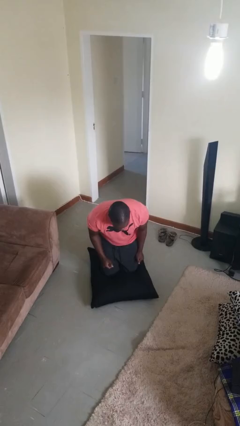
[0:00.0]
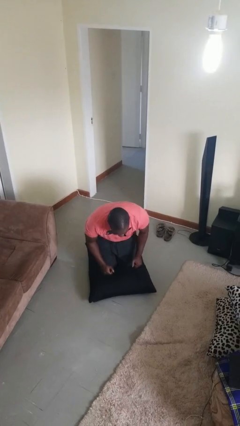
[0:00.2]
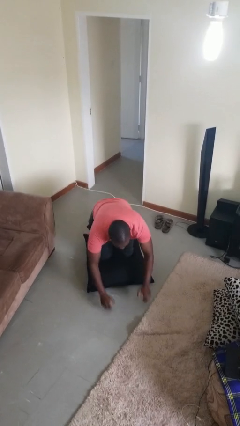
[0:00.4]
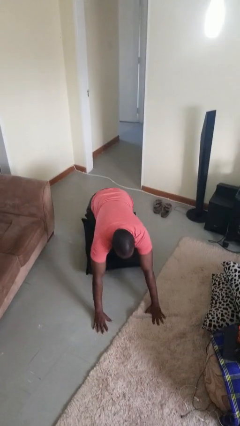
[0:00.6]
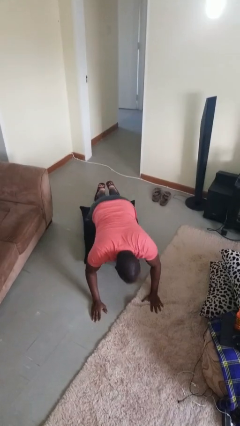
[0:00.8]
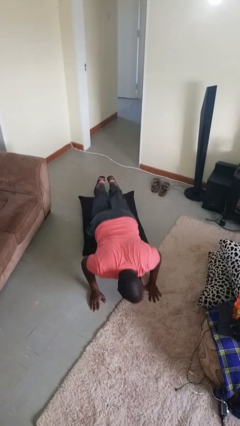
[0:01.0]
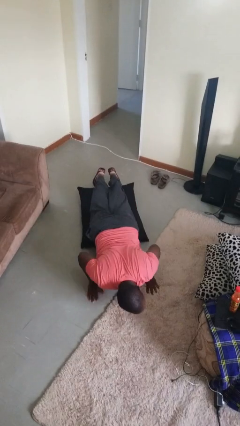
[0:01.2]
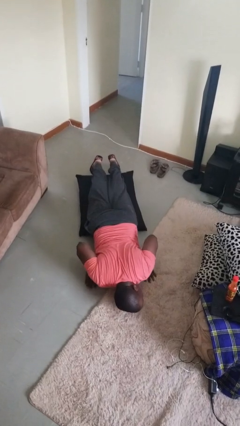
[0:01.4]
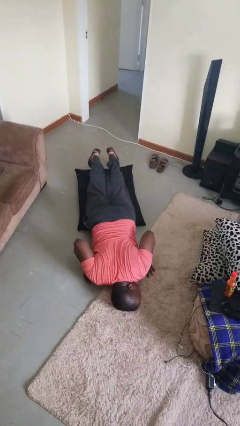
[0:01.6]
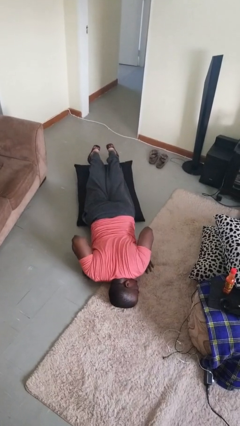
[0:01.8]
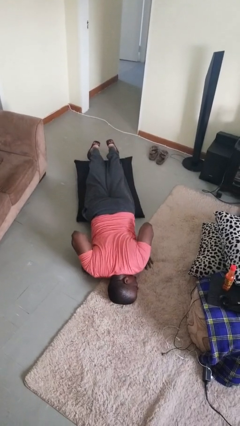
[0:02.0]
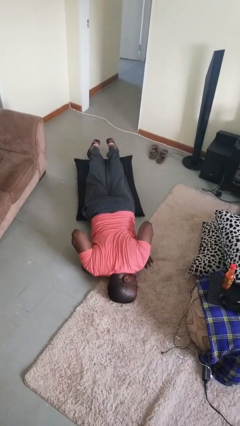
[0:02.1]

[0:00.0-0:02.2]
person lies down on floor

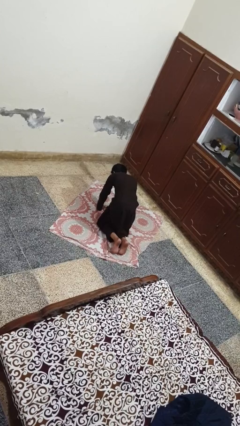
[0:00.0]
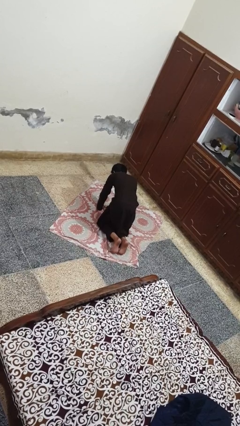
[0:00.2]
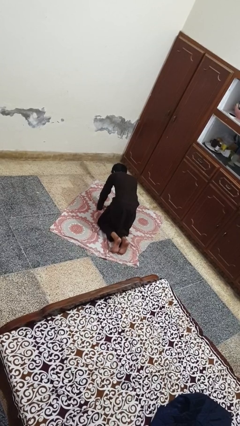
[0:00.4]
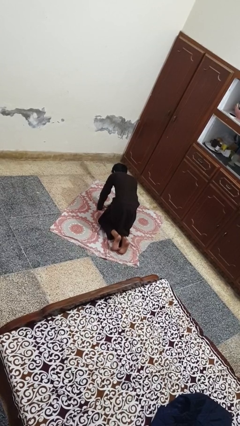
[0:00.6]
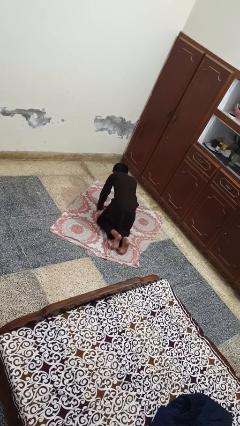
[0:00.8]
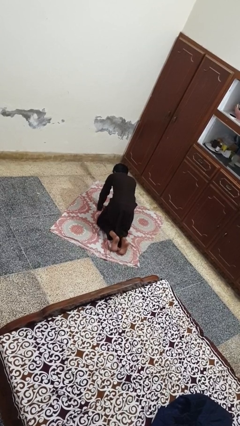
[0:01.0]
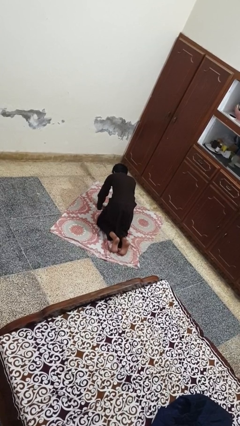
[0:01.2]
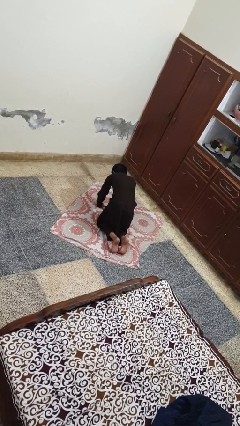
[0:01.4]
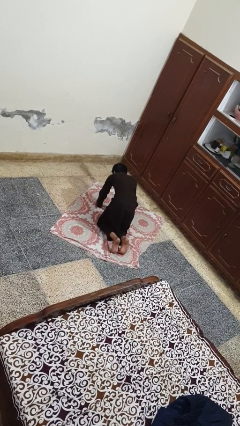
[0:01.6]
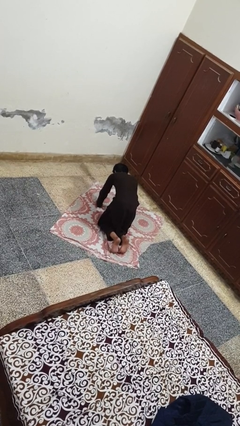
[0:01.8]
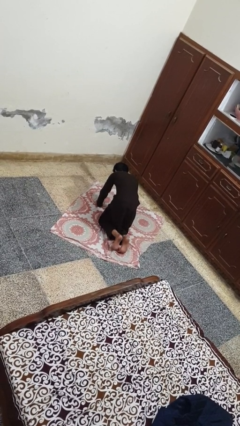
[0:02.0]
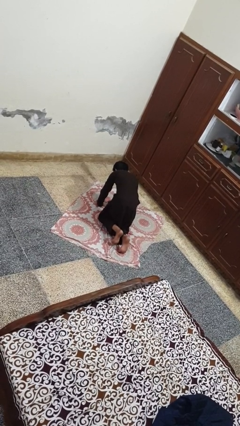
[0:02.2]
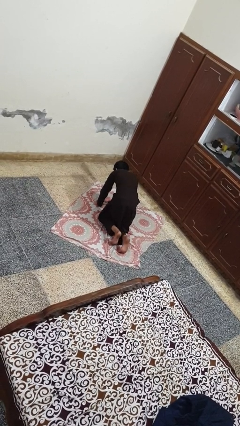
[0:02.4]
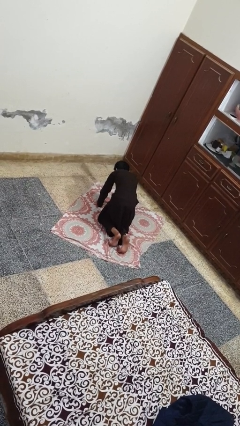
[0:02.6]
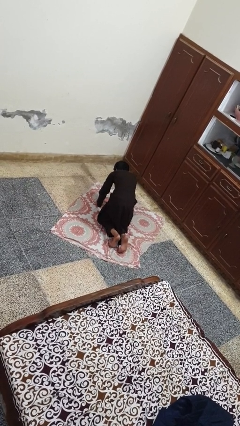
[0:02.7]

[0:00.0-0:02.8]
person crawls

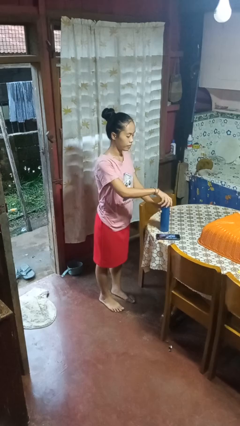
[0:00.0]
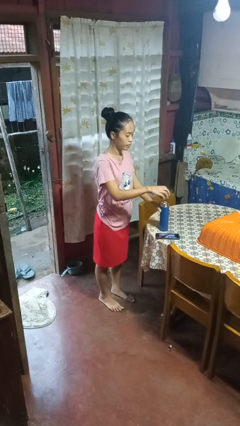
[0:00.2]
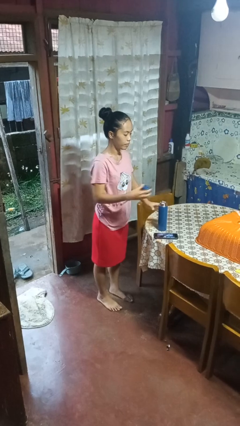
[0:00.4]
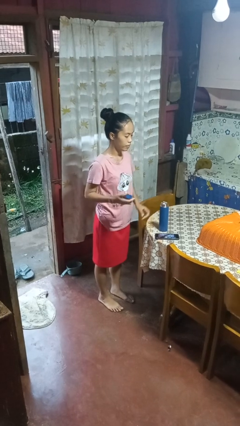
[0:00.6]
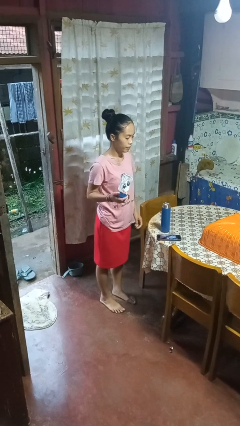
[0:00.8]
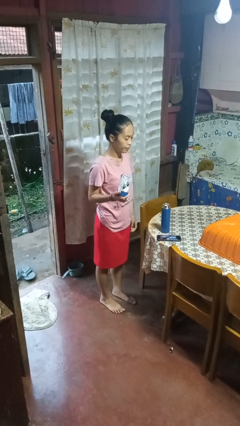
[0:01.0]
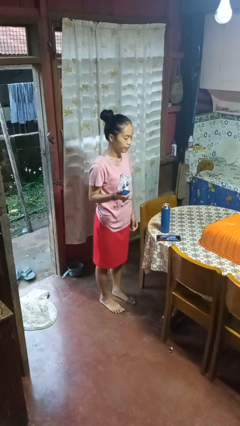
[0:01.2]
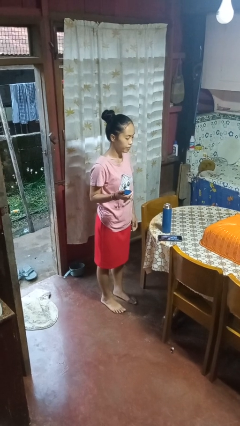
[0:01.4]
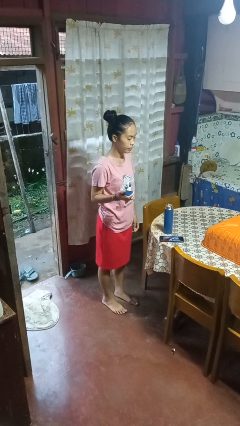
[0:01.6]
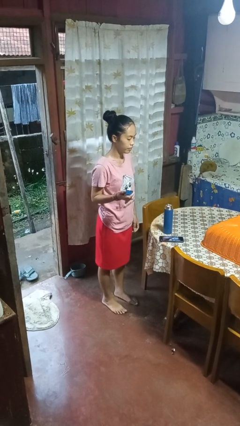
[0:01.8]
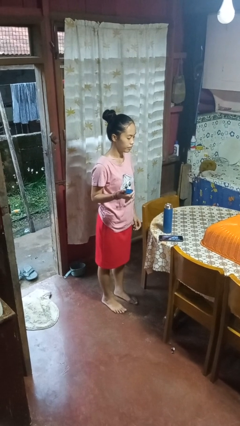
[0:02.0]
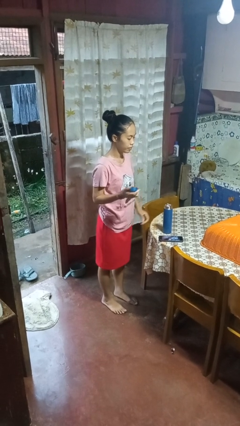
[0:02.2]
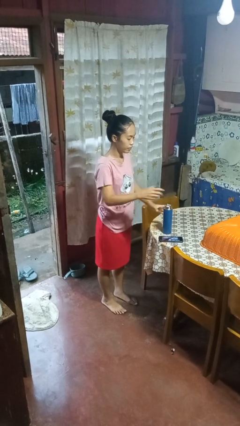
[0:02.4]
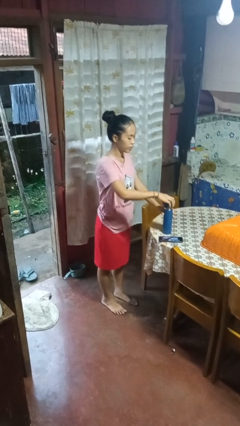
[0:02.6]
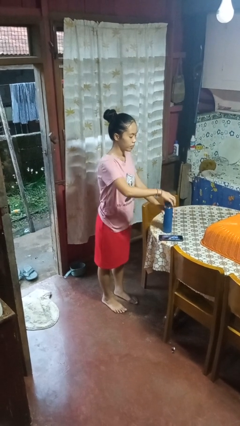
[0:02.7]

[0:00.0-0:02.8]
person opens jar

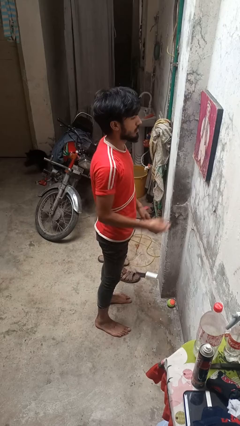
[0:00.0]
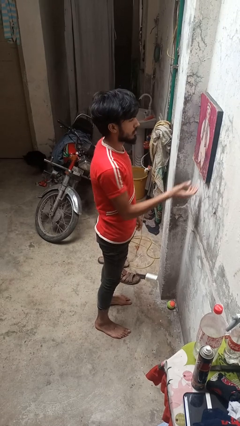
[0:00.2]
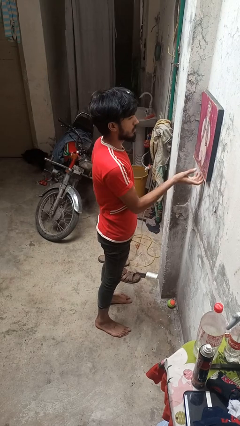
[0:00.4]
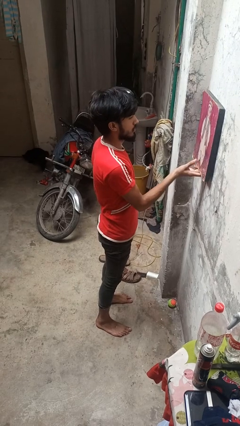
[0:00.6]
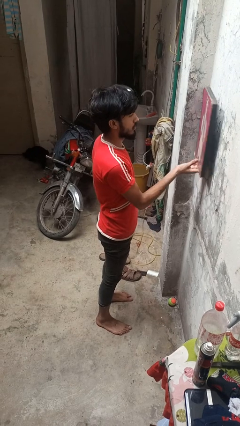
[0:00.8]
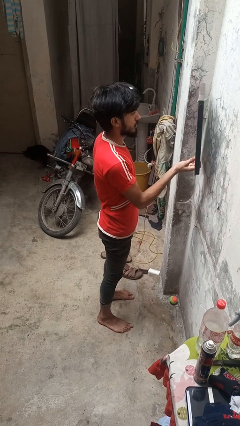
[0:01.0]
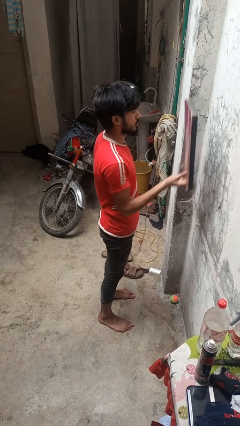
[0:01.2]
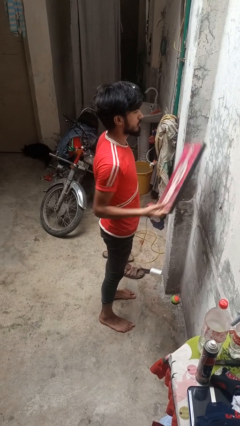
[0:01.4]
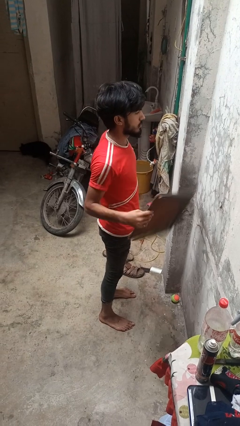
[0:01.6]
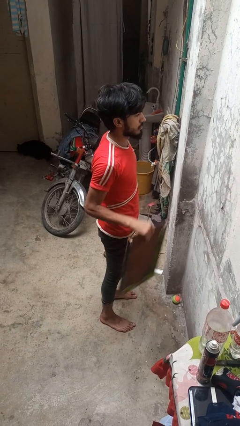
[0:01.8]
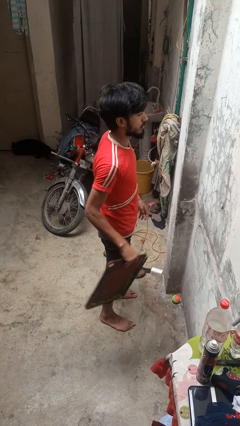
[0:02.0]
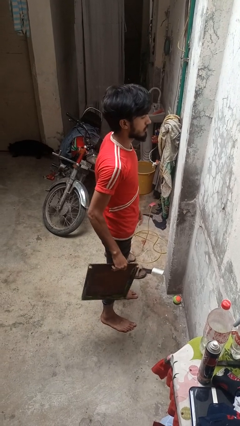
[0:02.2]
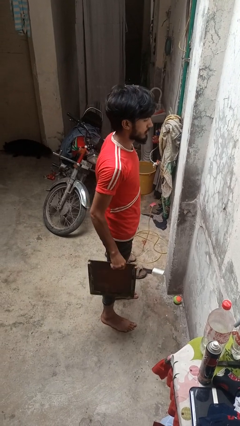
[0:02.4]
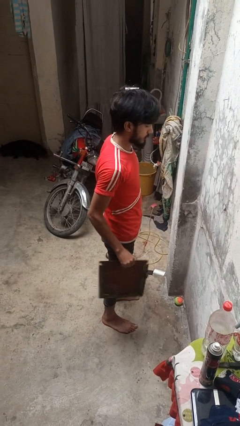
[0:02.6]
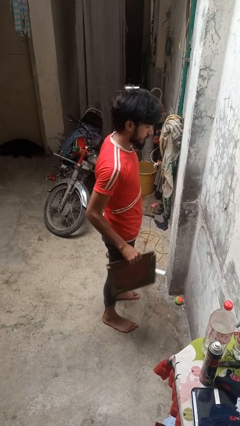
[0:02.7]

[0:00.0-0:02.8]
person takes down picture frame

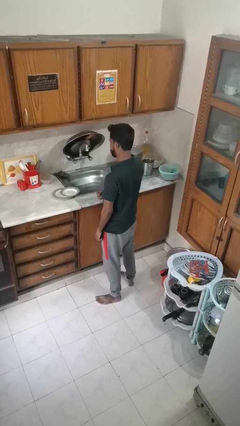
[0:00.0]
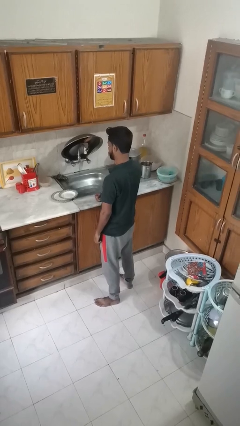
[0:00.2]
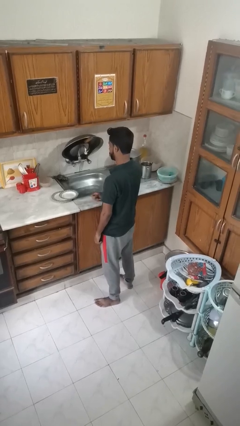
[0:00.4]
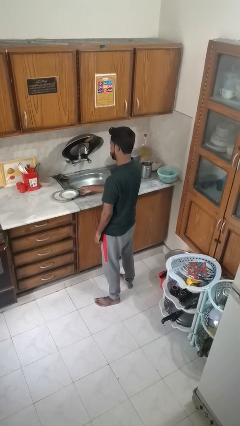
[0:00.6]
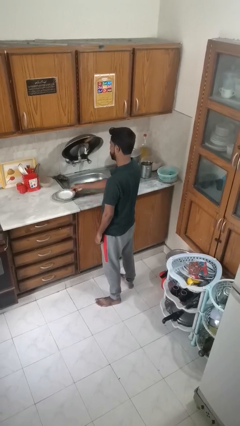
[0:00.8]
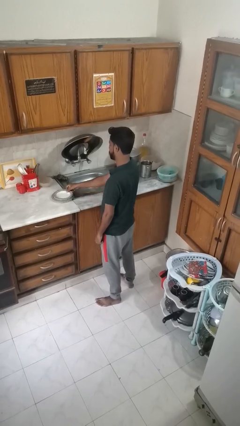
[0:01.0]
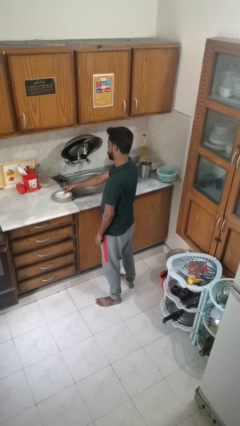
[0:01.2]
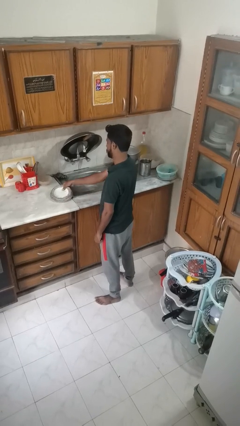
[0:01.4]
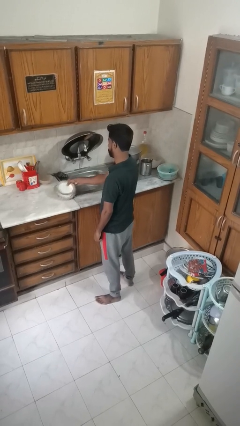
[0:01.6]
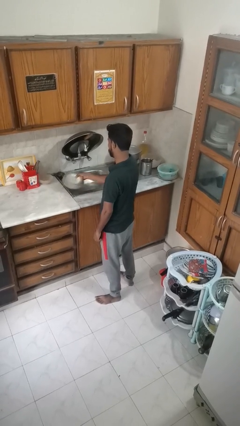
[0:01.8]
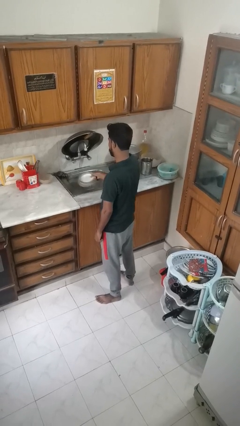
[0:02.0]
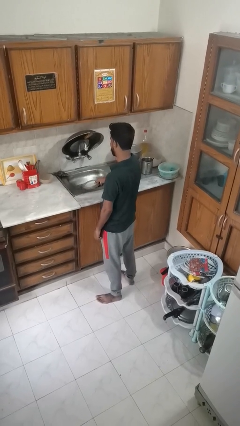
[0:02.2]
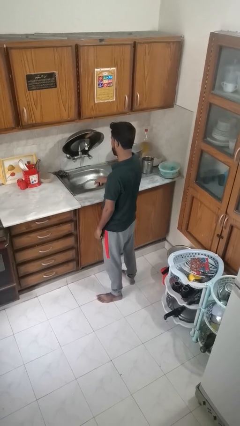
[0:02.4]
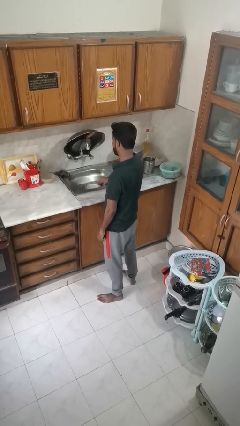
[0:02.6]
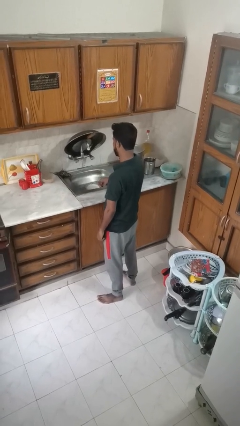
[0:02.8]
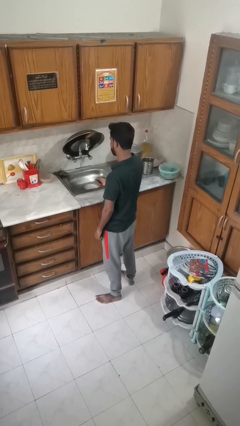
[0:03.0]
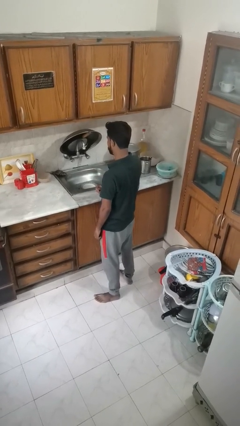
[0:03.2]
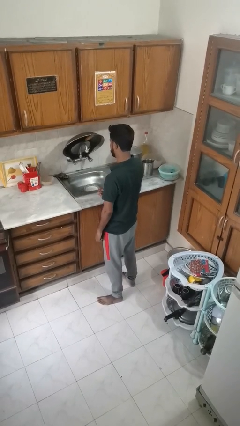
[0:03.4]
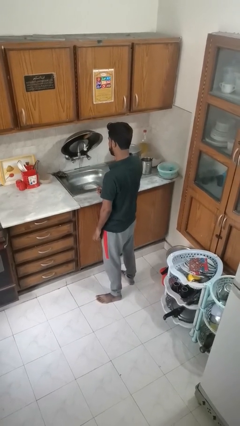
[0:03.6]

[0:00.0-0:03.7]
person opens dishwasher

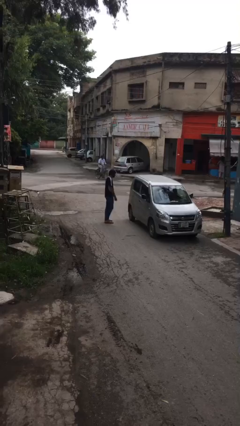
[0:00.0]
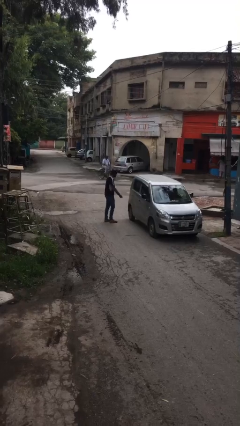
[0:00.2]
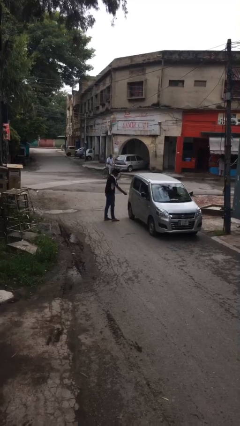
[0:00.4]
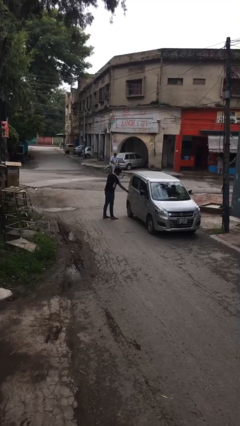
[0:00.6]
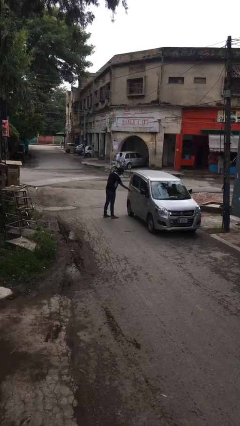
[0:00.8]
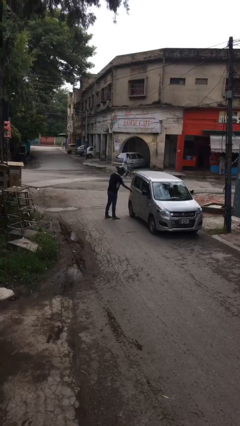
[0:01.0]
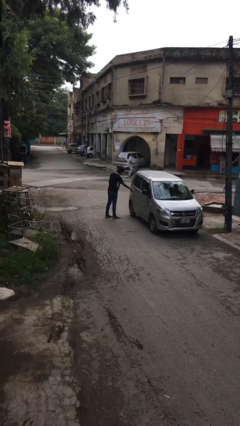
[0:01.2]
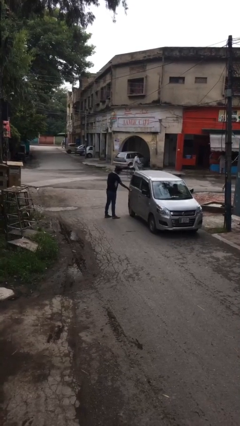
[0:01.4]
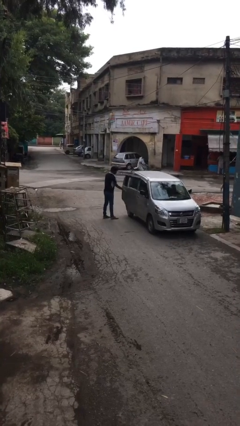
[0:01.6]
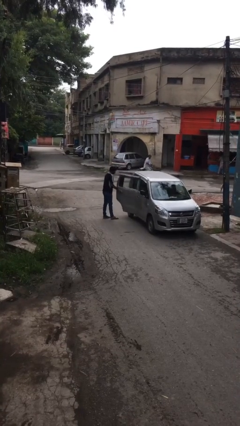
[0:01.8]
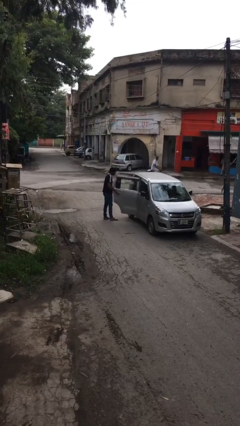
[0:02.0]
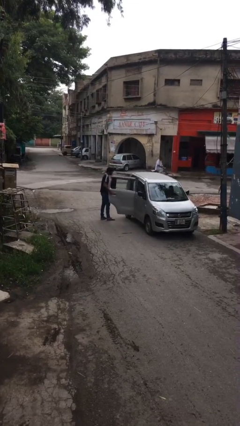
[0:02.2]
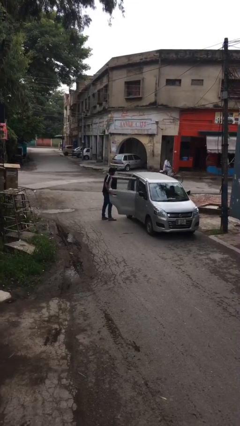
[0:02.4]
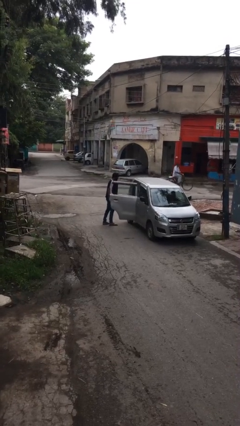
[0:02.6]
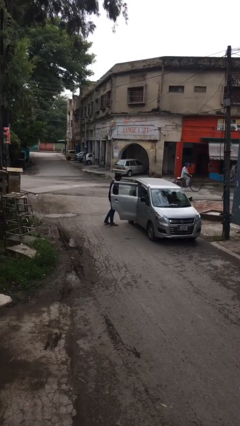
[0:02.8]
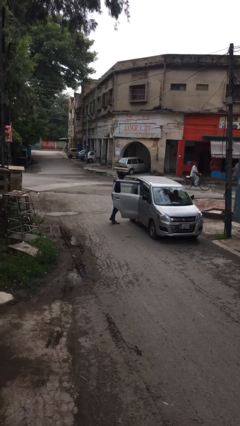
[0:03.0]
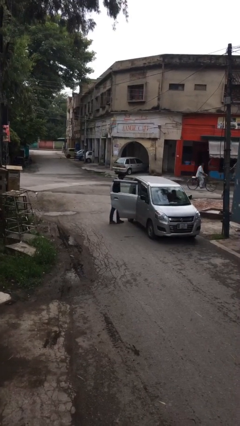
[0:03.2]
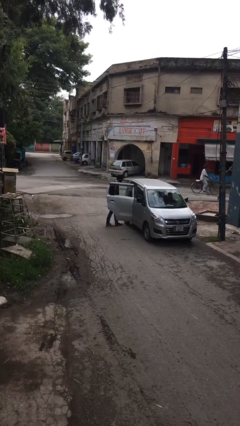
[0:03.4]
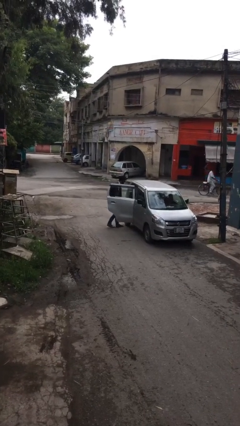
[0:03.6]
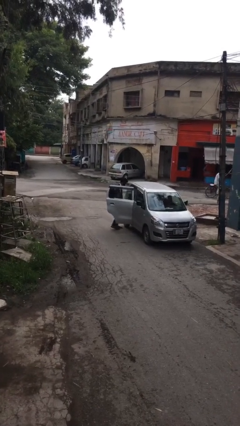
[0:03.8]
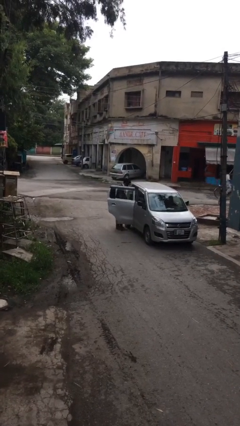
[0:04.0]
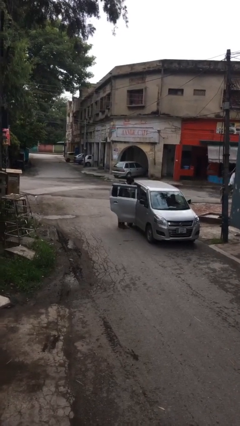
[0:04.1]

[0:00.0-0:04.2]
person opens car door
